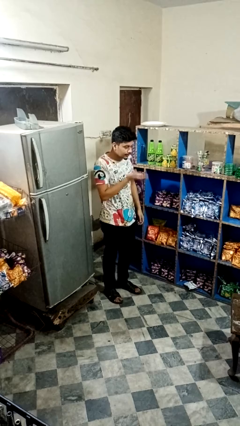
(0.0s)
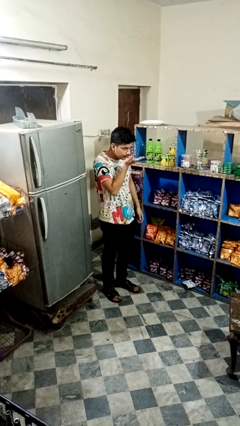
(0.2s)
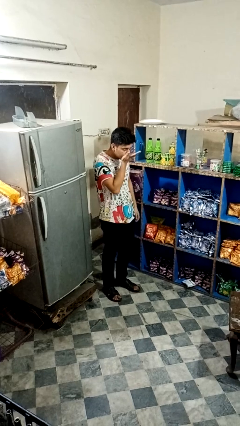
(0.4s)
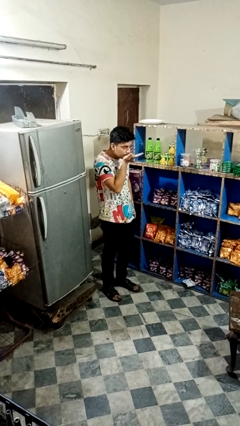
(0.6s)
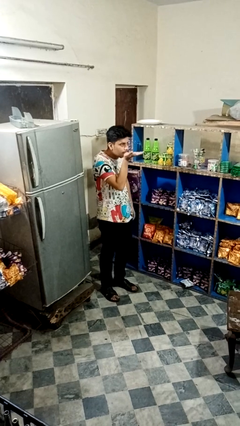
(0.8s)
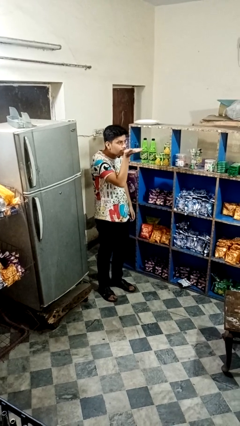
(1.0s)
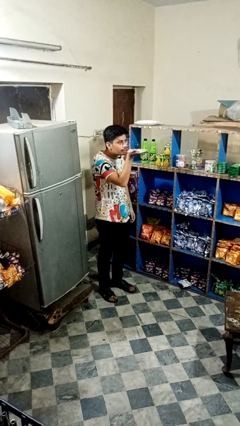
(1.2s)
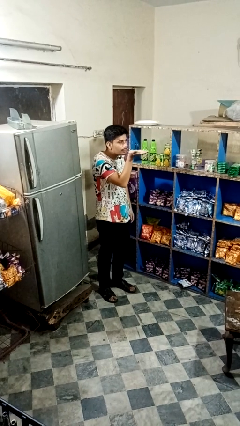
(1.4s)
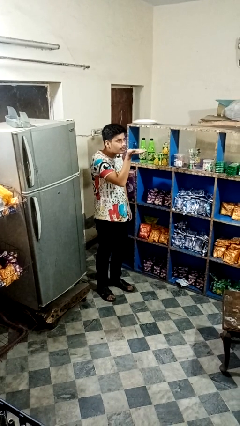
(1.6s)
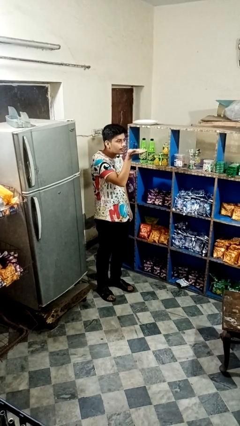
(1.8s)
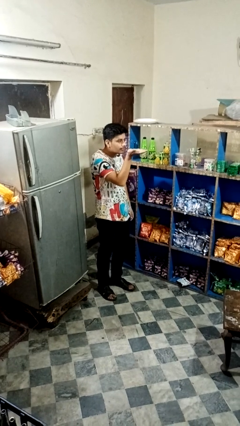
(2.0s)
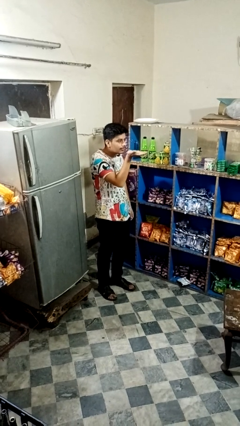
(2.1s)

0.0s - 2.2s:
person gestures blow kiss

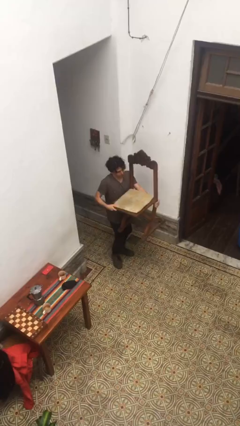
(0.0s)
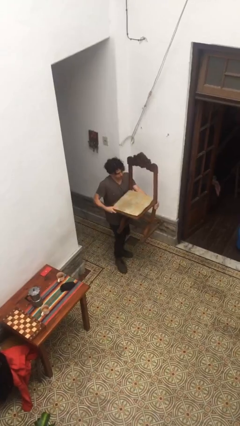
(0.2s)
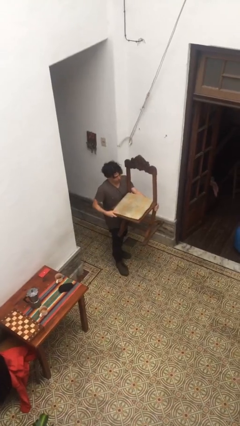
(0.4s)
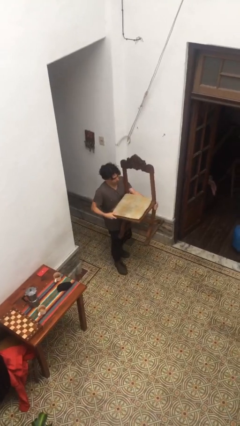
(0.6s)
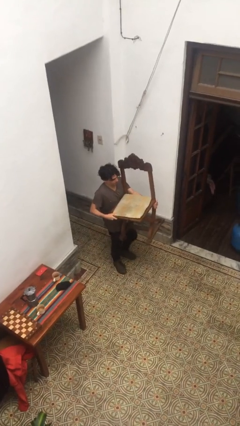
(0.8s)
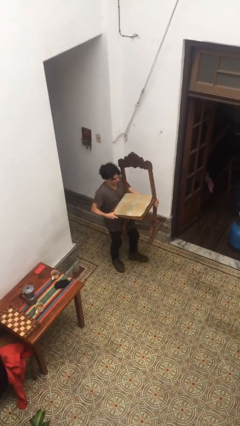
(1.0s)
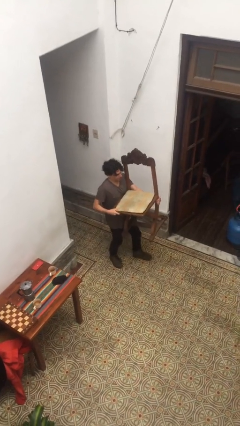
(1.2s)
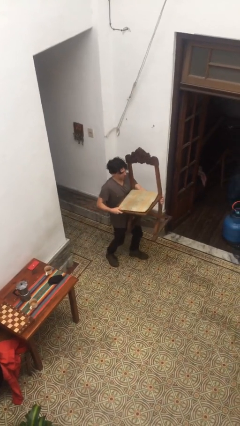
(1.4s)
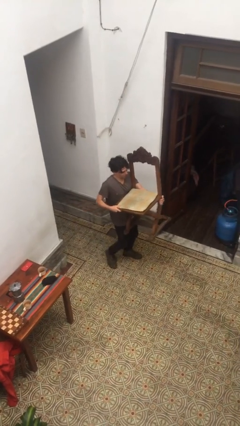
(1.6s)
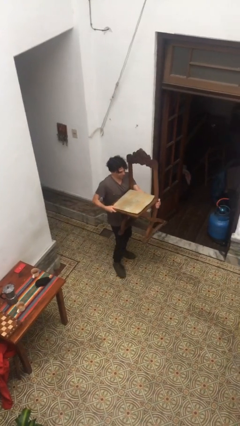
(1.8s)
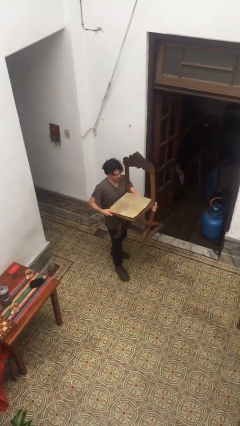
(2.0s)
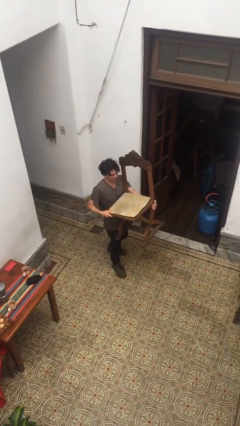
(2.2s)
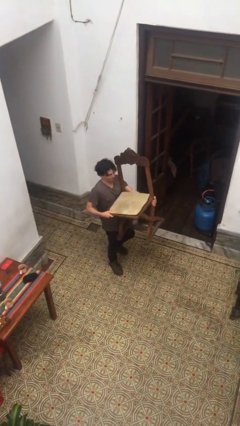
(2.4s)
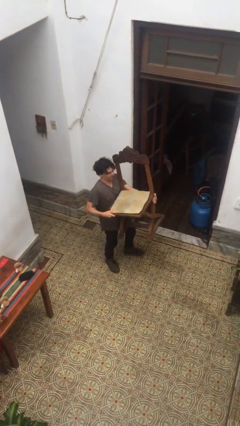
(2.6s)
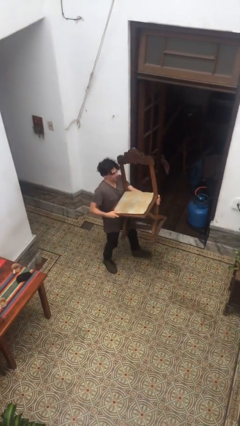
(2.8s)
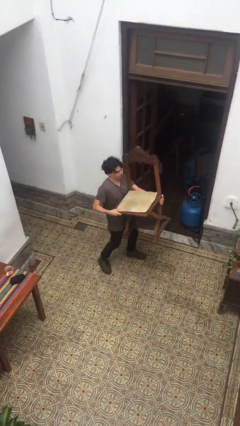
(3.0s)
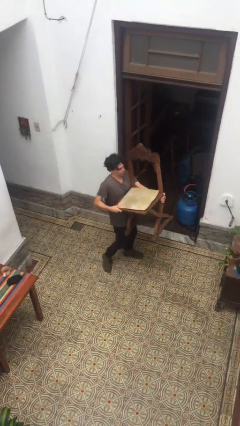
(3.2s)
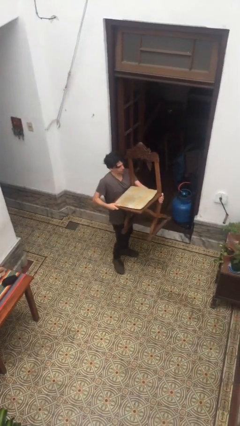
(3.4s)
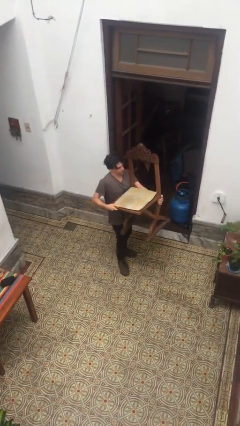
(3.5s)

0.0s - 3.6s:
person carries heavy object

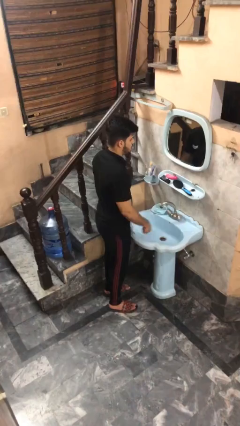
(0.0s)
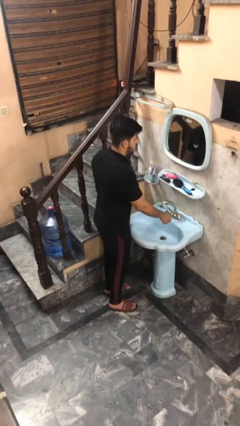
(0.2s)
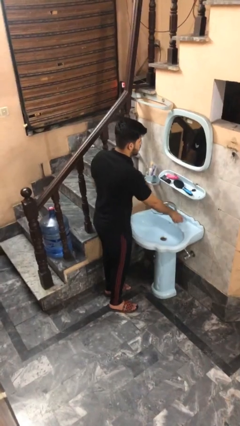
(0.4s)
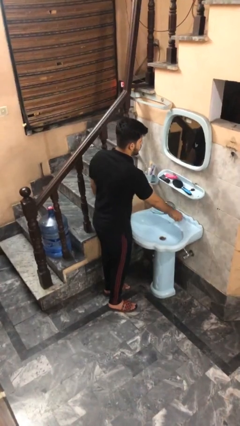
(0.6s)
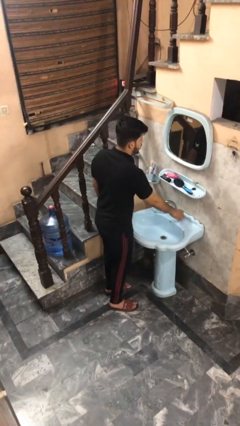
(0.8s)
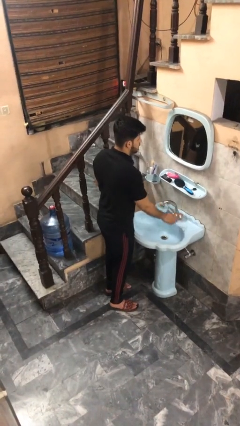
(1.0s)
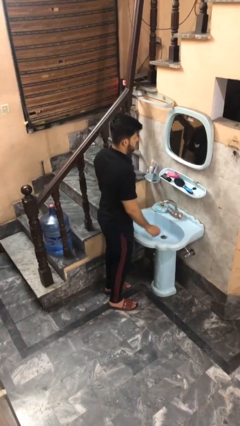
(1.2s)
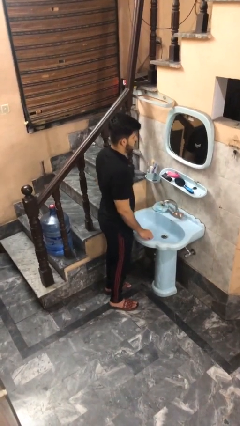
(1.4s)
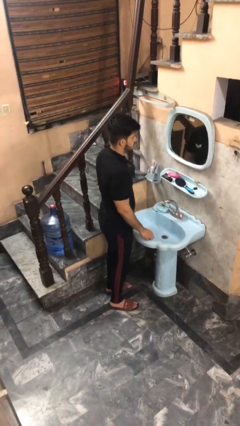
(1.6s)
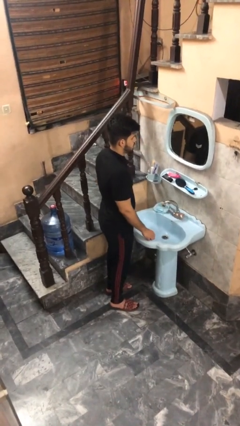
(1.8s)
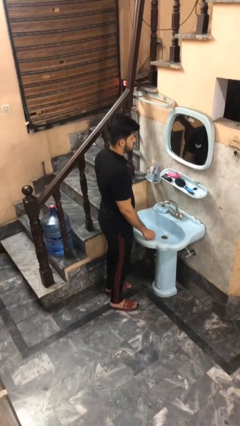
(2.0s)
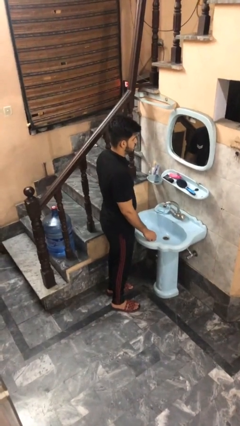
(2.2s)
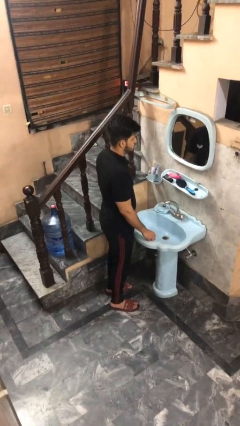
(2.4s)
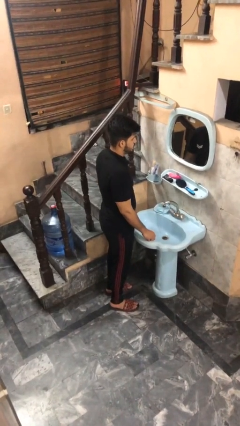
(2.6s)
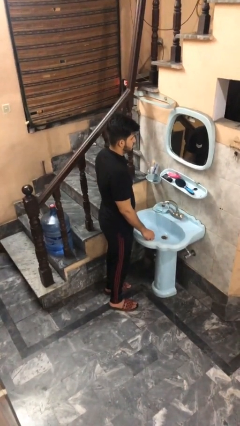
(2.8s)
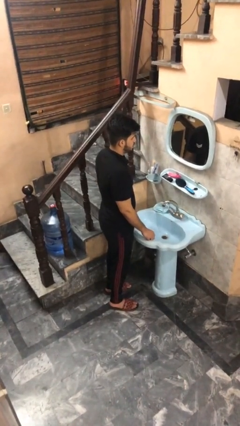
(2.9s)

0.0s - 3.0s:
person turns on faucet

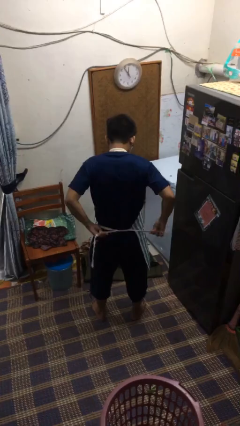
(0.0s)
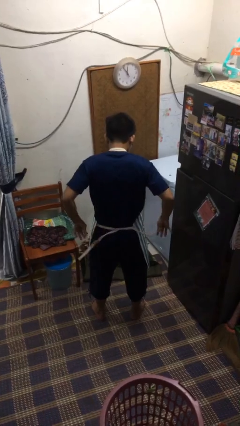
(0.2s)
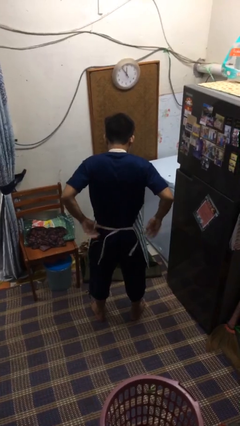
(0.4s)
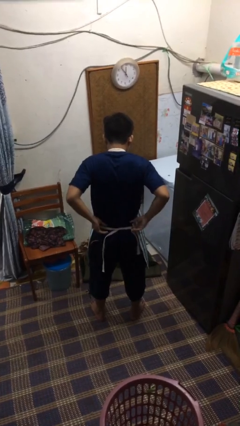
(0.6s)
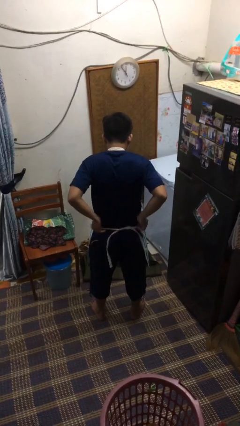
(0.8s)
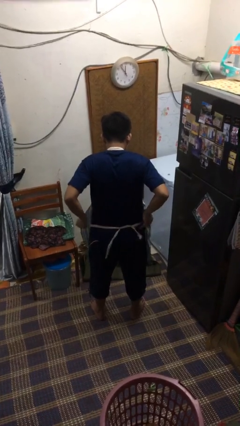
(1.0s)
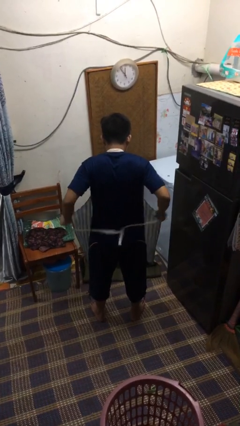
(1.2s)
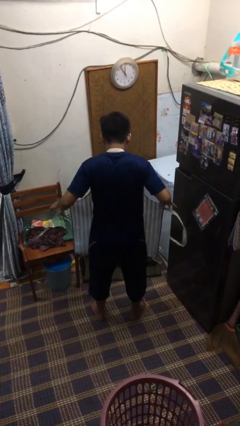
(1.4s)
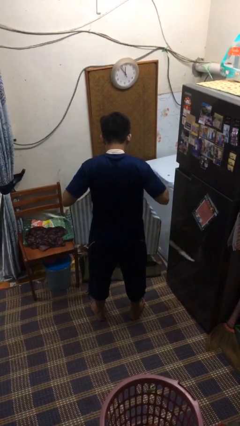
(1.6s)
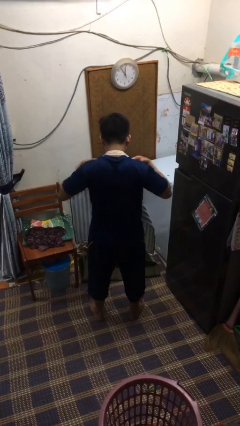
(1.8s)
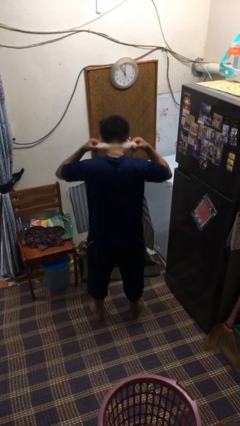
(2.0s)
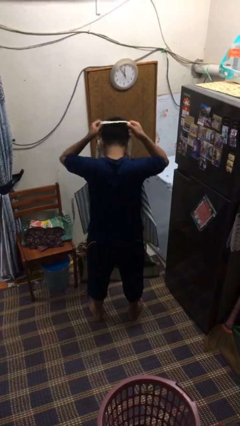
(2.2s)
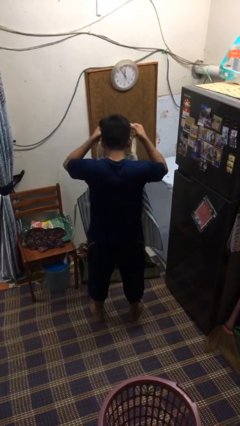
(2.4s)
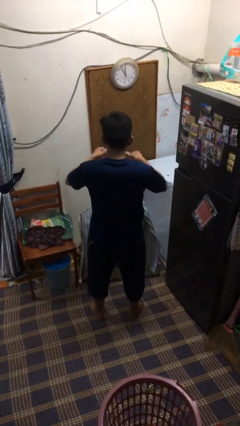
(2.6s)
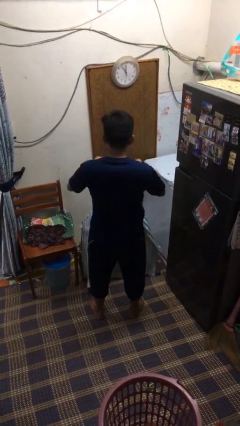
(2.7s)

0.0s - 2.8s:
person takes off apron

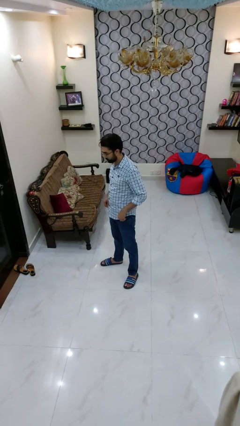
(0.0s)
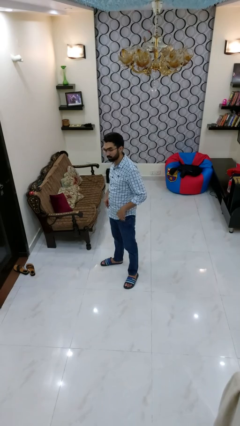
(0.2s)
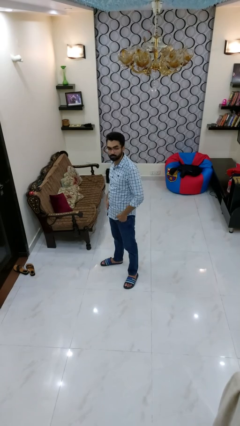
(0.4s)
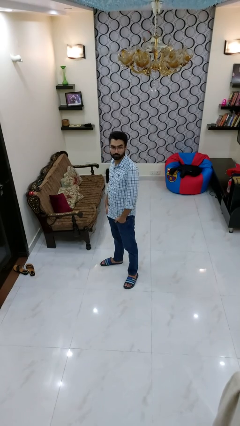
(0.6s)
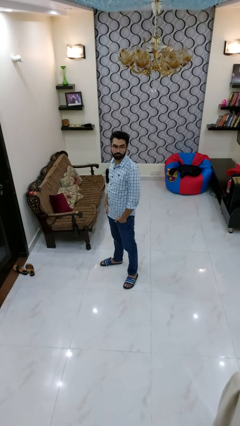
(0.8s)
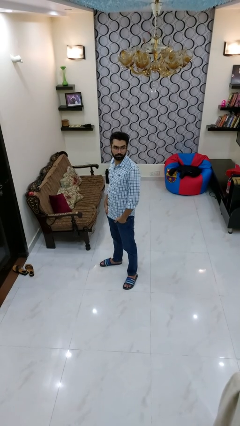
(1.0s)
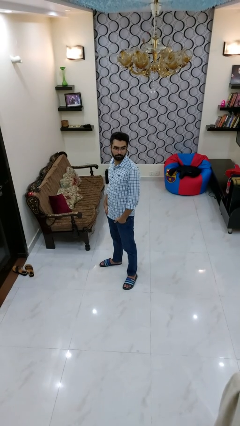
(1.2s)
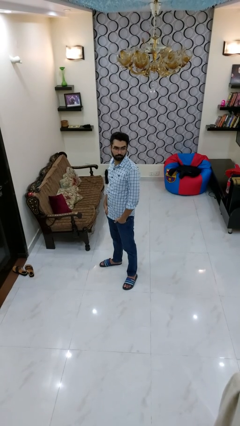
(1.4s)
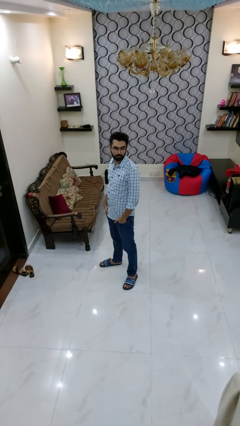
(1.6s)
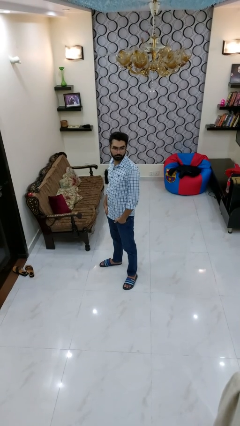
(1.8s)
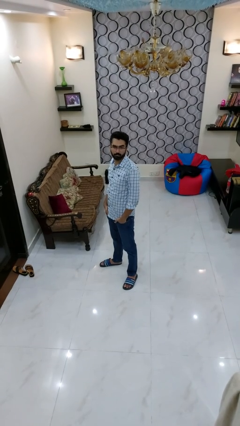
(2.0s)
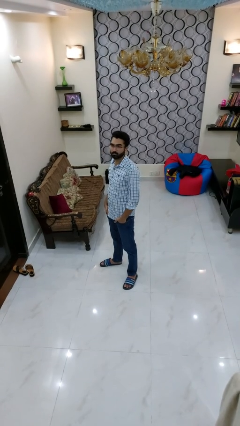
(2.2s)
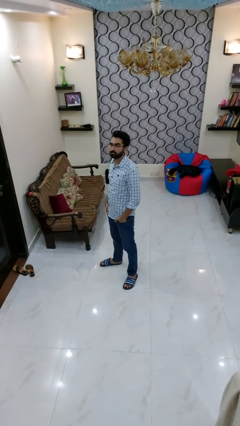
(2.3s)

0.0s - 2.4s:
person puts hands in back pockets

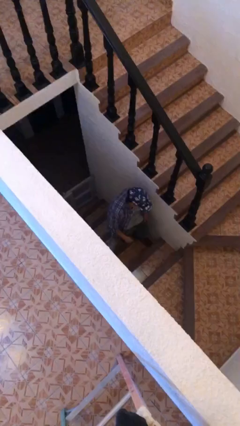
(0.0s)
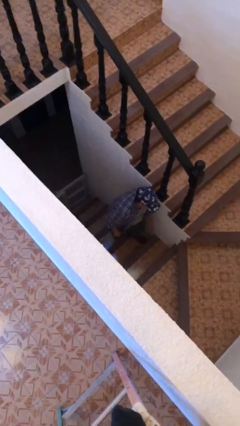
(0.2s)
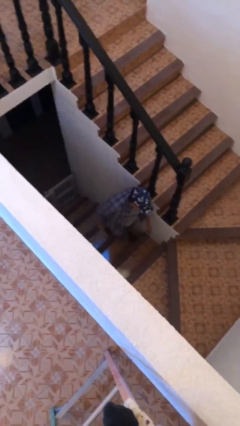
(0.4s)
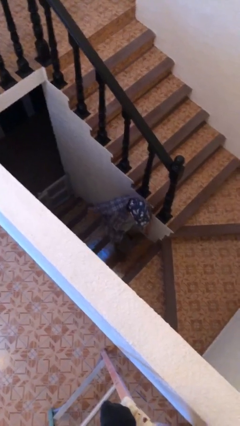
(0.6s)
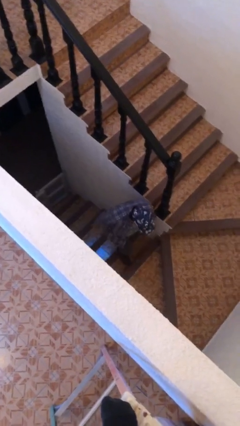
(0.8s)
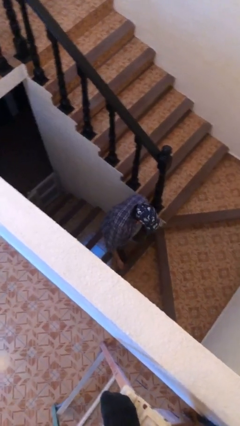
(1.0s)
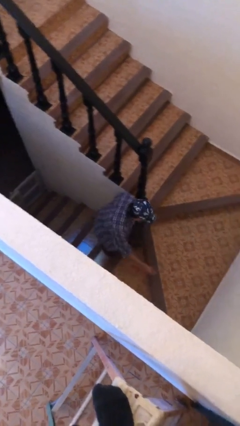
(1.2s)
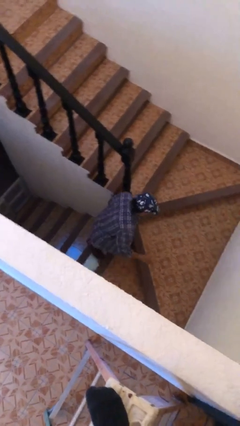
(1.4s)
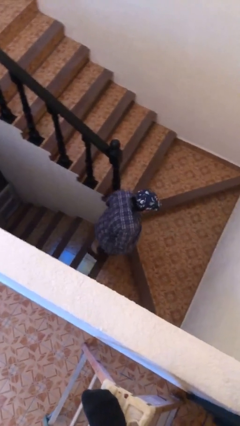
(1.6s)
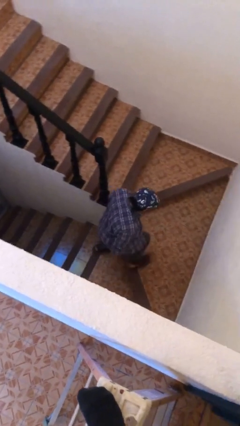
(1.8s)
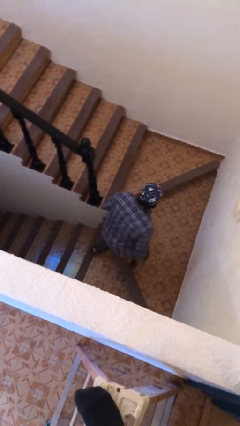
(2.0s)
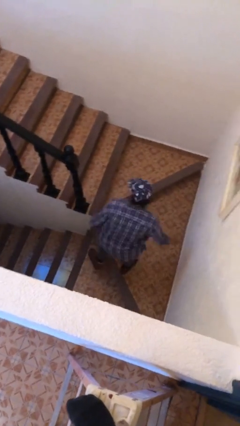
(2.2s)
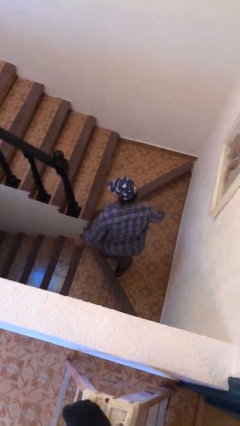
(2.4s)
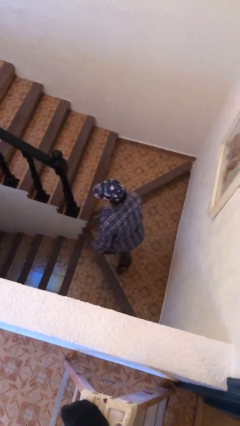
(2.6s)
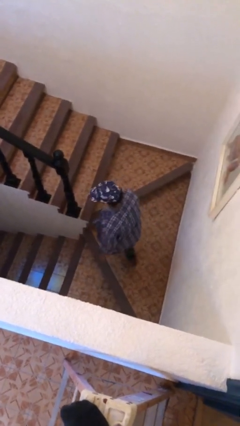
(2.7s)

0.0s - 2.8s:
person climbs up stairs
